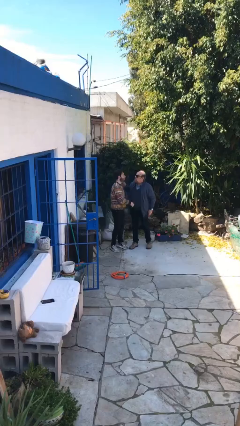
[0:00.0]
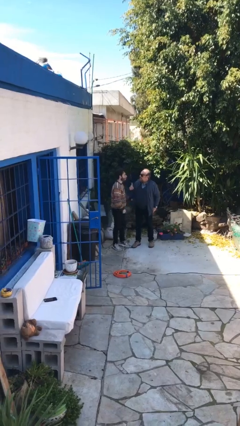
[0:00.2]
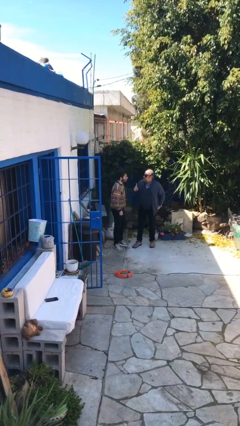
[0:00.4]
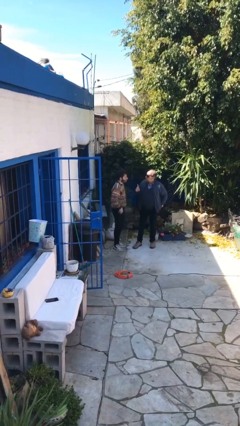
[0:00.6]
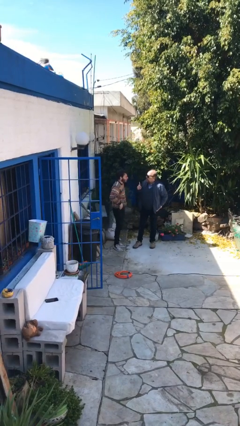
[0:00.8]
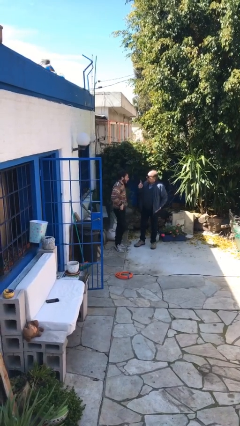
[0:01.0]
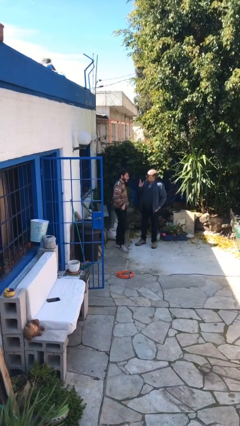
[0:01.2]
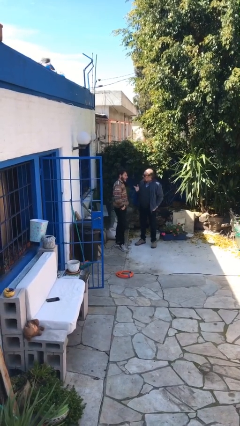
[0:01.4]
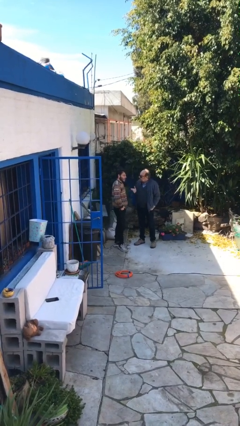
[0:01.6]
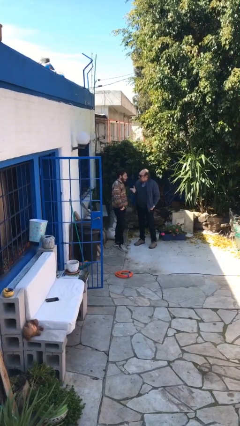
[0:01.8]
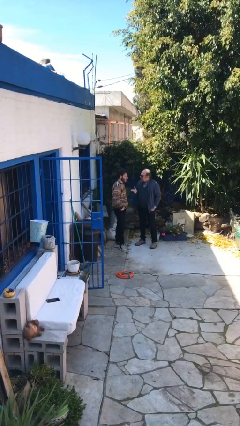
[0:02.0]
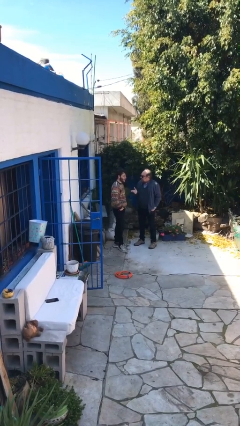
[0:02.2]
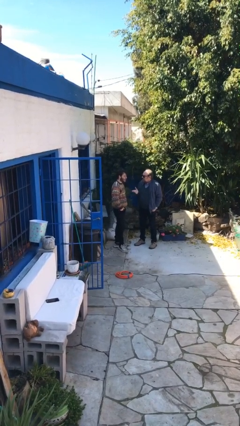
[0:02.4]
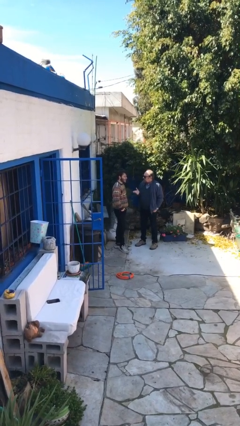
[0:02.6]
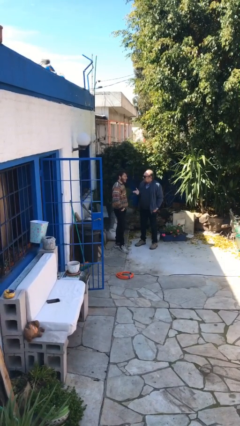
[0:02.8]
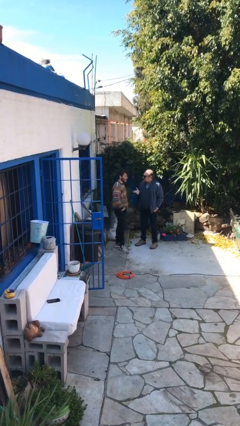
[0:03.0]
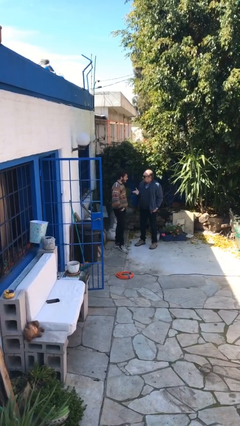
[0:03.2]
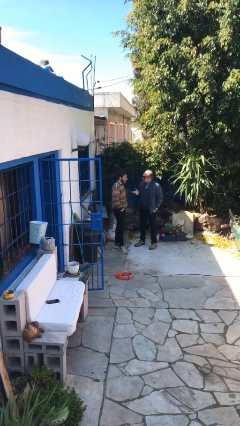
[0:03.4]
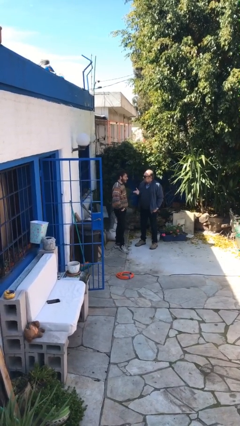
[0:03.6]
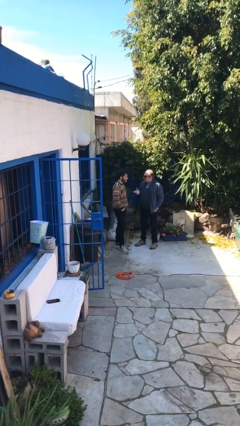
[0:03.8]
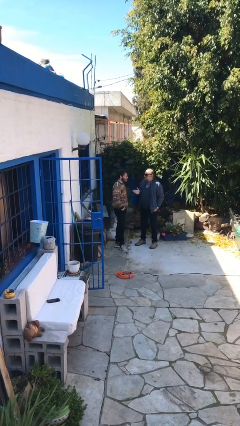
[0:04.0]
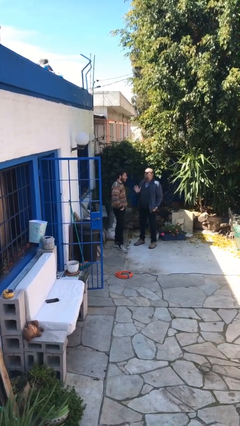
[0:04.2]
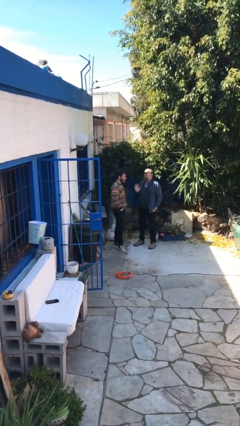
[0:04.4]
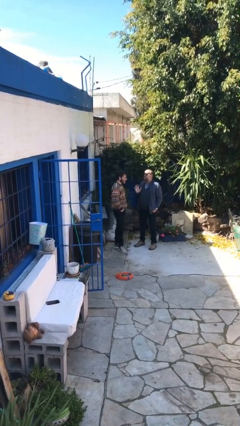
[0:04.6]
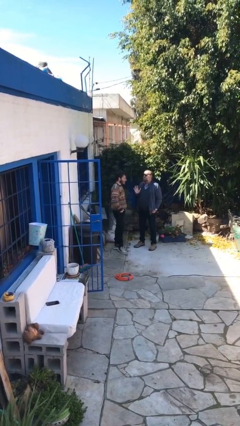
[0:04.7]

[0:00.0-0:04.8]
person talks to person

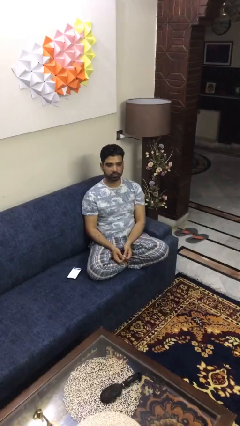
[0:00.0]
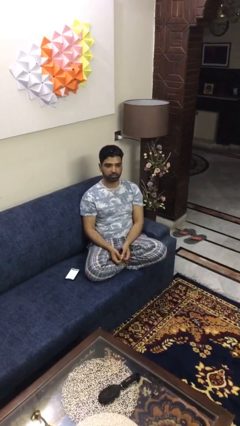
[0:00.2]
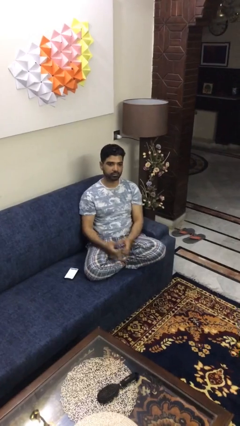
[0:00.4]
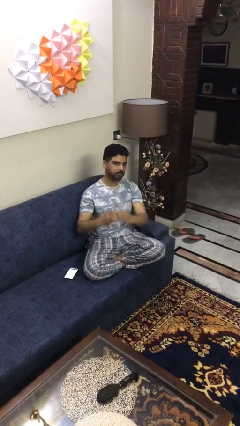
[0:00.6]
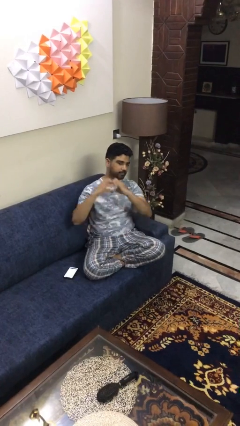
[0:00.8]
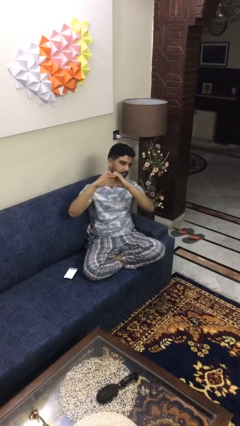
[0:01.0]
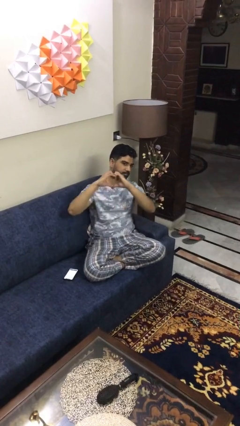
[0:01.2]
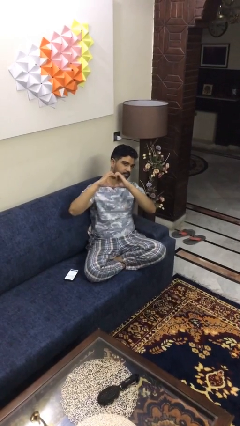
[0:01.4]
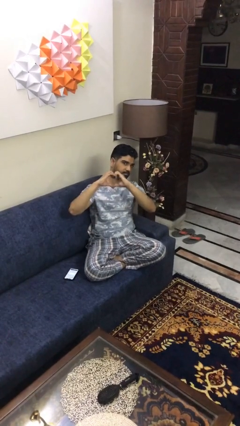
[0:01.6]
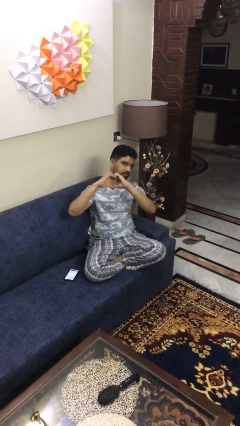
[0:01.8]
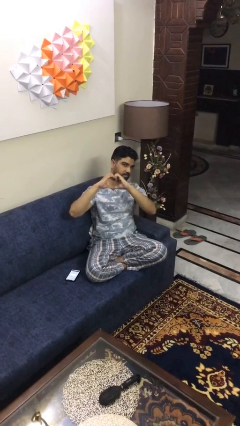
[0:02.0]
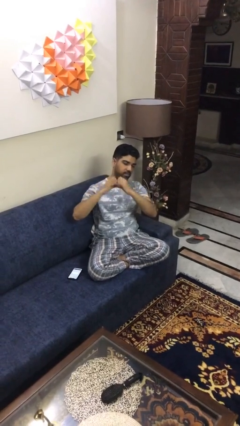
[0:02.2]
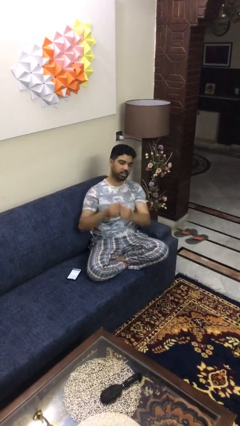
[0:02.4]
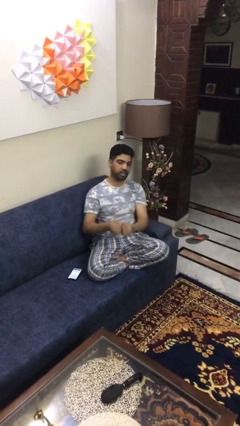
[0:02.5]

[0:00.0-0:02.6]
person gestures heart

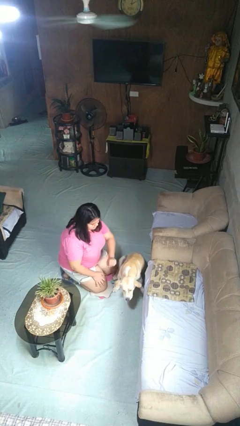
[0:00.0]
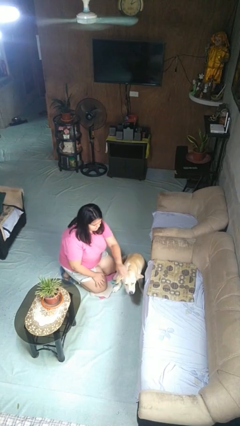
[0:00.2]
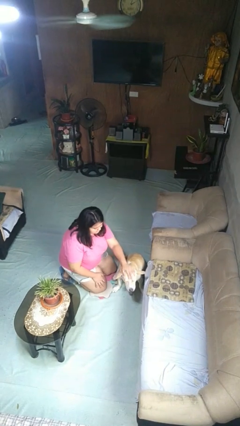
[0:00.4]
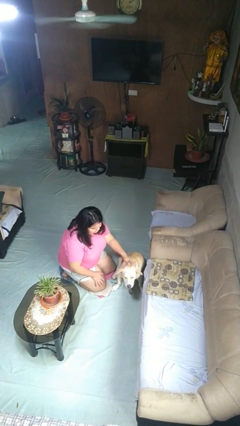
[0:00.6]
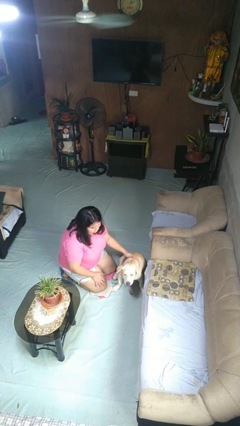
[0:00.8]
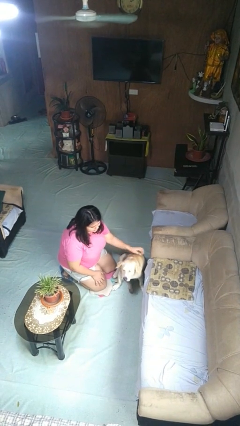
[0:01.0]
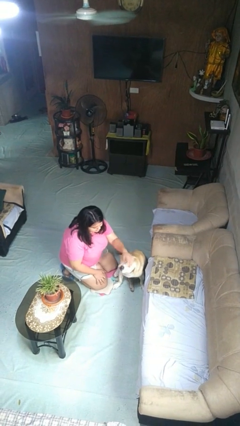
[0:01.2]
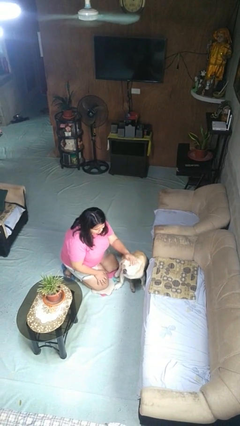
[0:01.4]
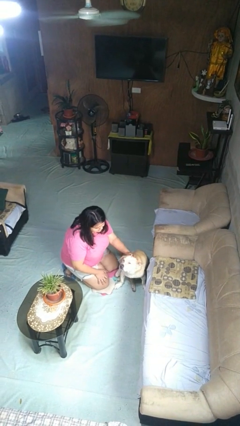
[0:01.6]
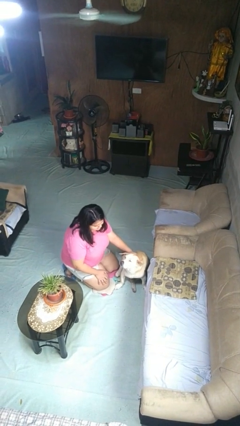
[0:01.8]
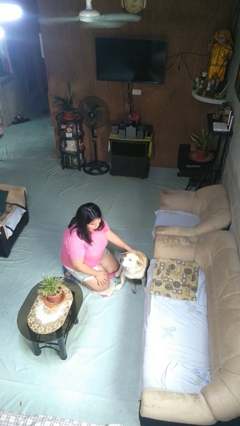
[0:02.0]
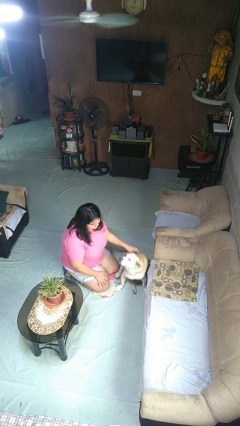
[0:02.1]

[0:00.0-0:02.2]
person pets dog

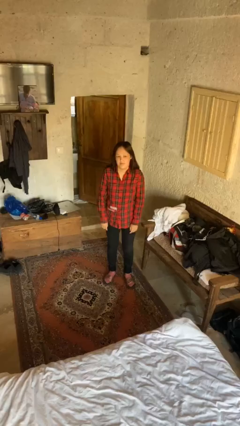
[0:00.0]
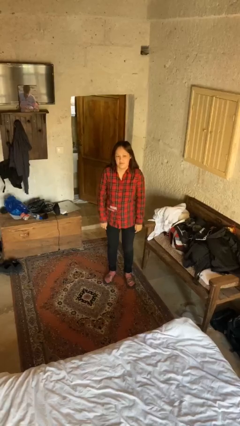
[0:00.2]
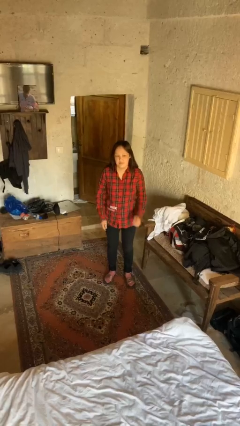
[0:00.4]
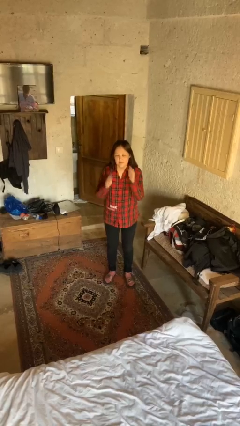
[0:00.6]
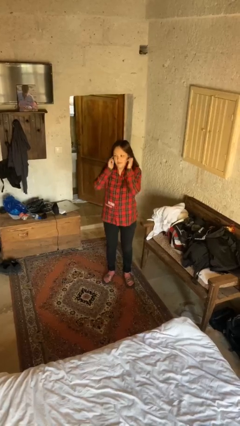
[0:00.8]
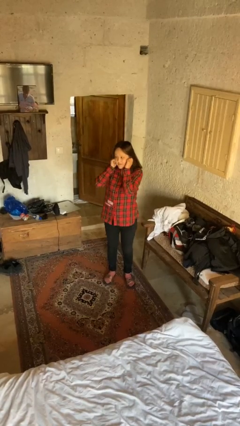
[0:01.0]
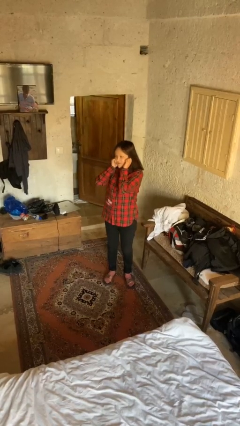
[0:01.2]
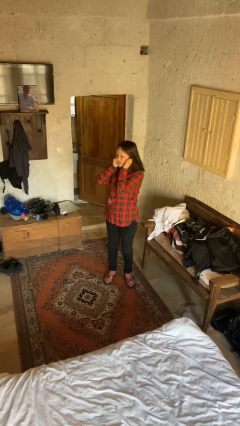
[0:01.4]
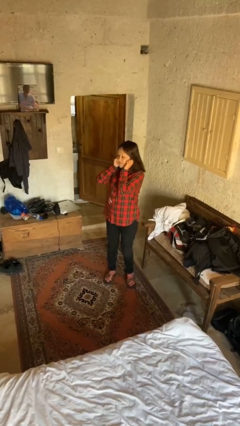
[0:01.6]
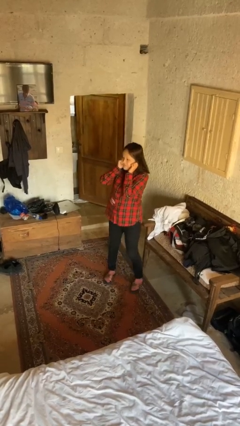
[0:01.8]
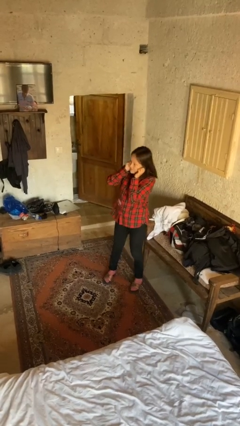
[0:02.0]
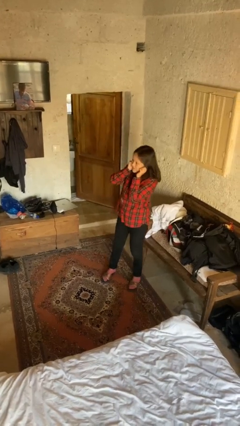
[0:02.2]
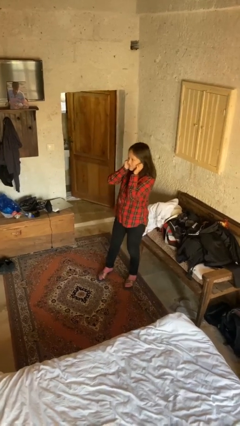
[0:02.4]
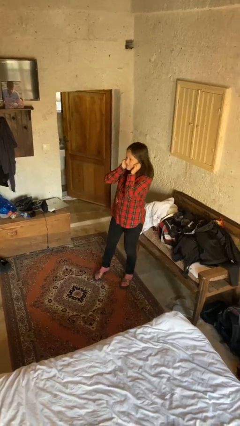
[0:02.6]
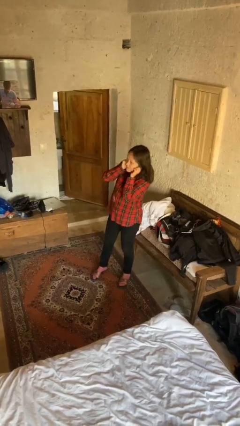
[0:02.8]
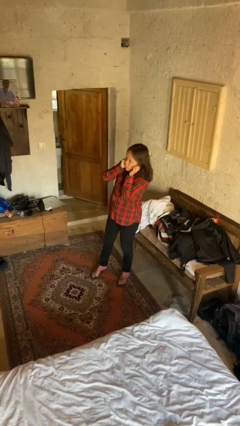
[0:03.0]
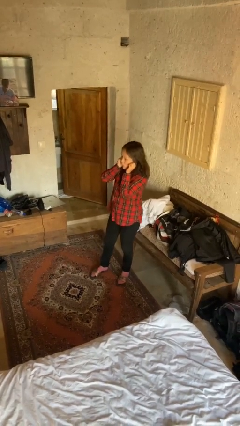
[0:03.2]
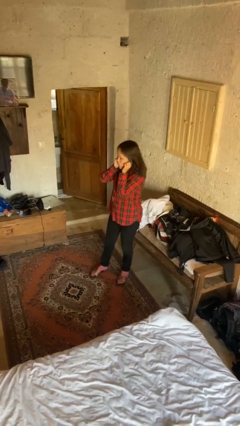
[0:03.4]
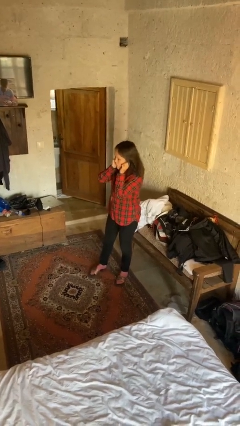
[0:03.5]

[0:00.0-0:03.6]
person puts fingers in ear

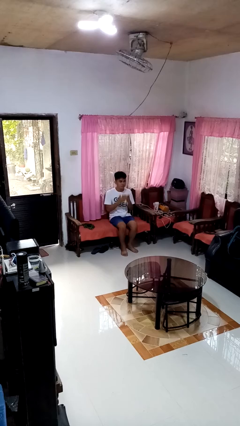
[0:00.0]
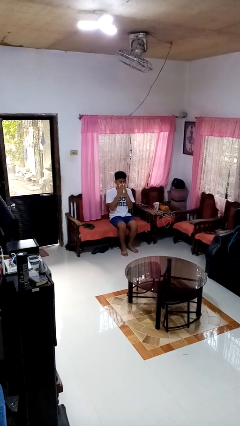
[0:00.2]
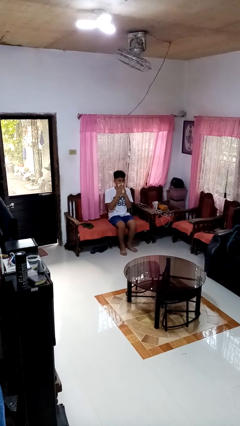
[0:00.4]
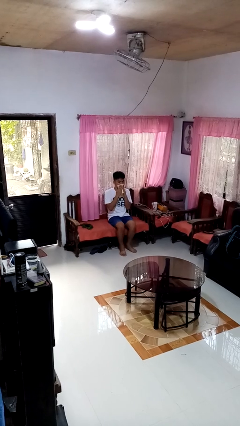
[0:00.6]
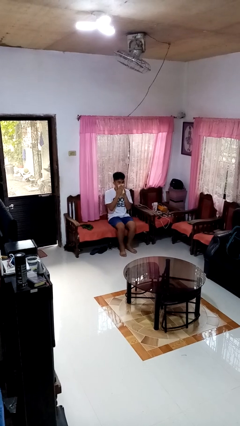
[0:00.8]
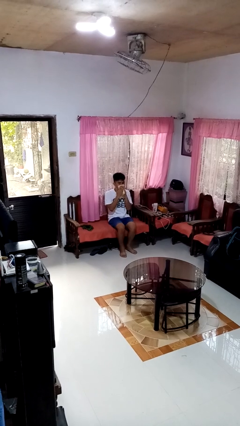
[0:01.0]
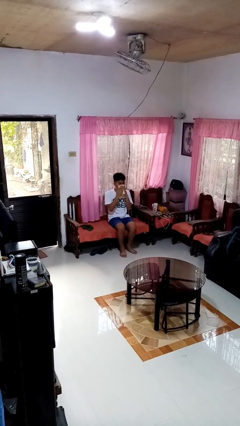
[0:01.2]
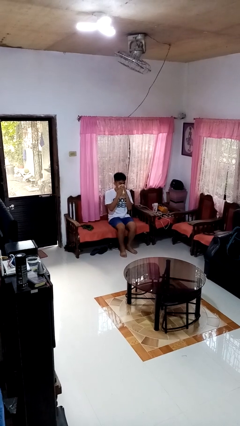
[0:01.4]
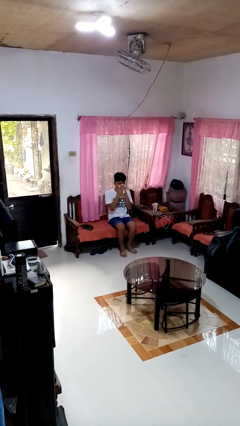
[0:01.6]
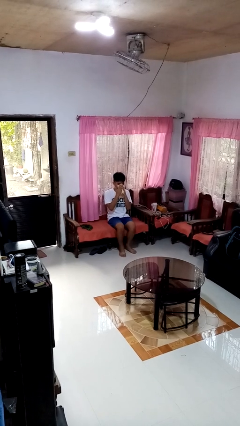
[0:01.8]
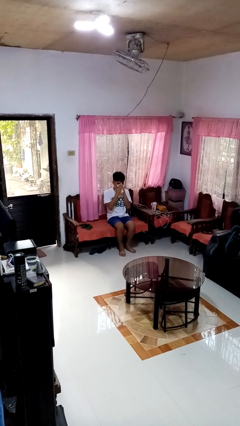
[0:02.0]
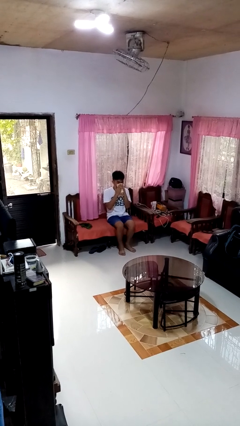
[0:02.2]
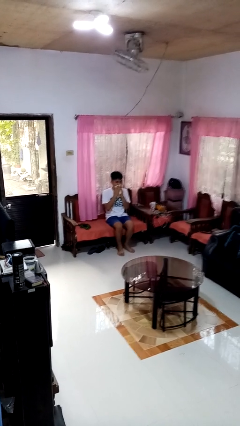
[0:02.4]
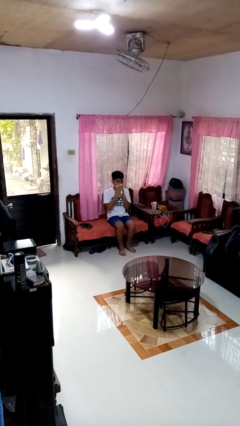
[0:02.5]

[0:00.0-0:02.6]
person wipes mouth with napkin

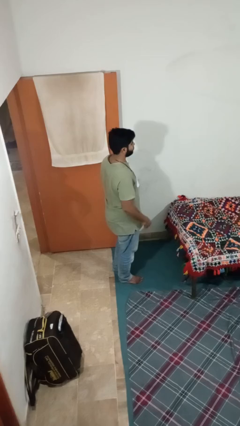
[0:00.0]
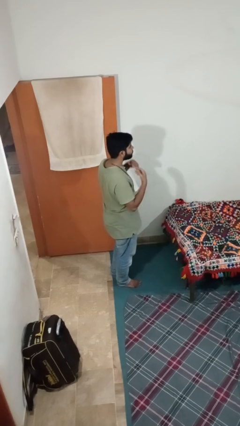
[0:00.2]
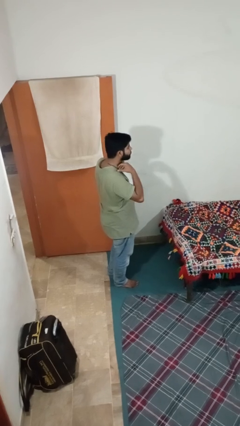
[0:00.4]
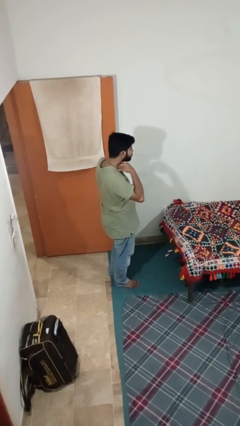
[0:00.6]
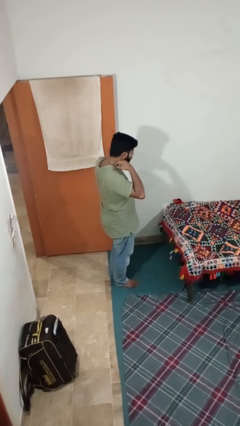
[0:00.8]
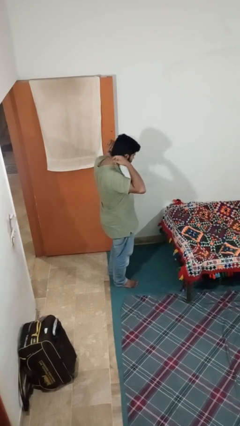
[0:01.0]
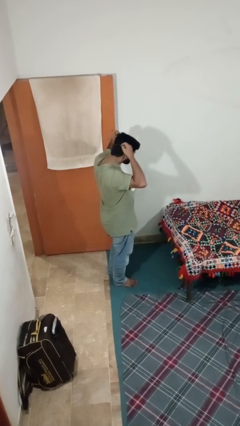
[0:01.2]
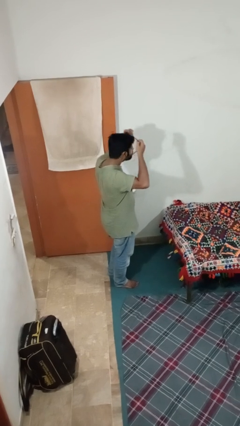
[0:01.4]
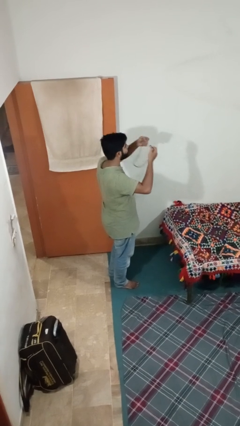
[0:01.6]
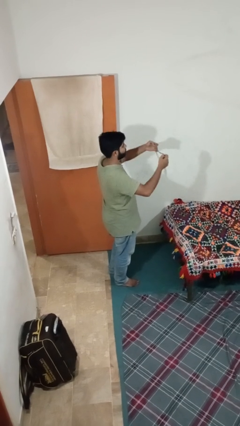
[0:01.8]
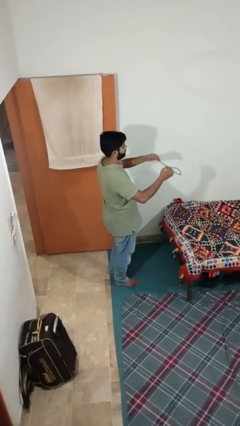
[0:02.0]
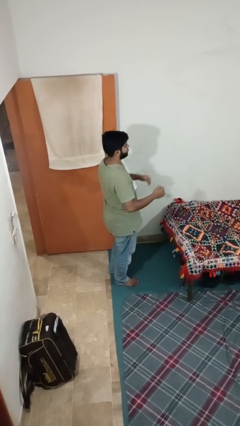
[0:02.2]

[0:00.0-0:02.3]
person takes off necklace
